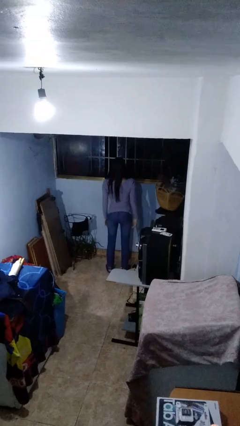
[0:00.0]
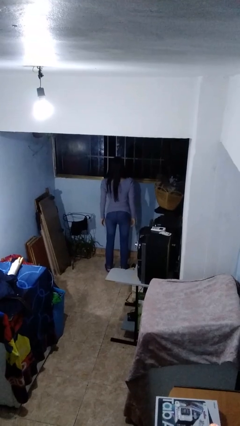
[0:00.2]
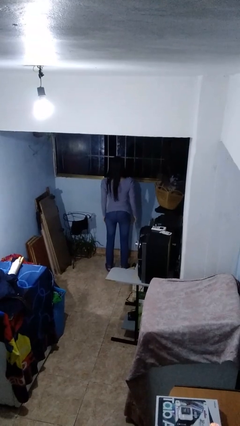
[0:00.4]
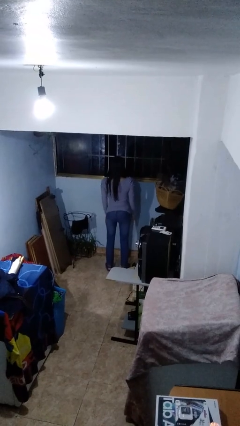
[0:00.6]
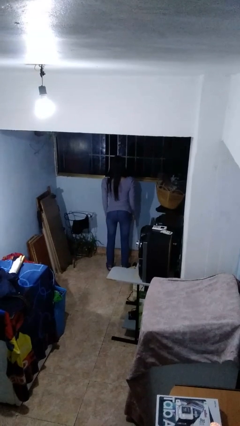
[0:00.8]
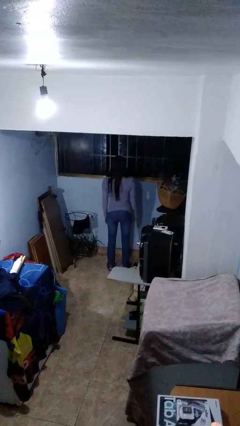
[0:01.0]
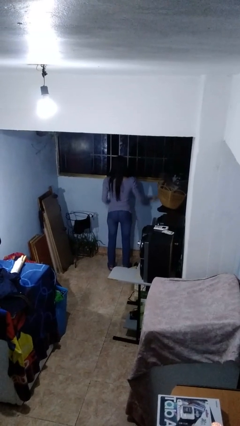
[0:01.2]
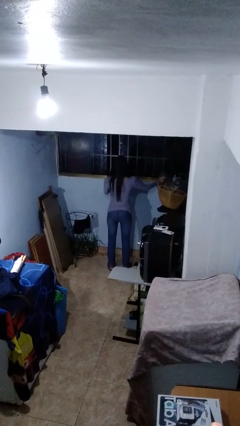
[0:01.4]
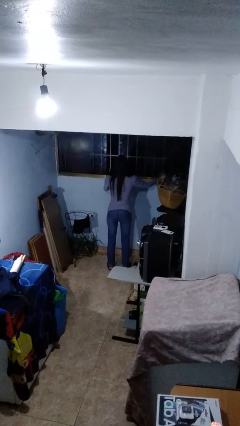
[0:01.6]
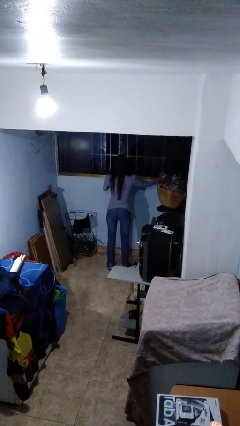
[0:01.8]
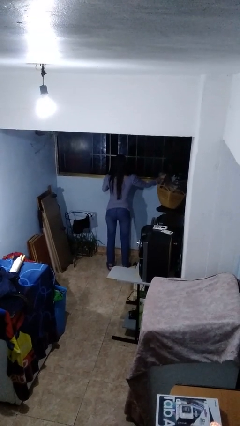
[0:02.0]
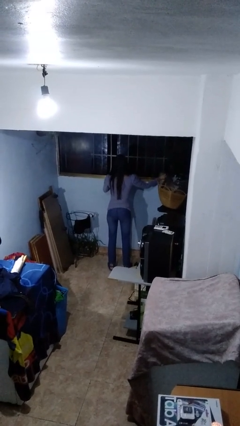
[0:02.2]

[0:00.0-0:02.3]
person closes home window

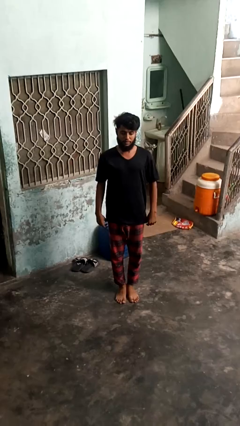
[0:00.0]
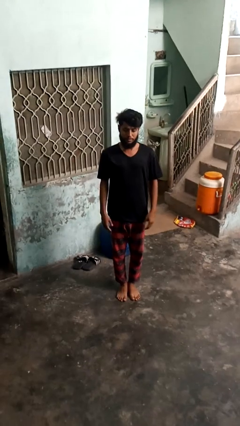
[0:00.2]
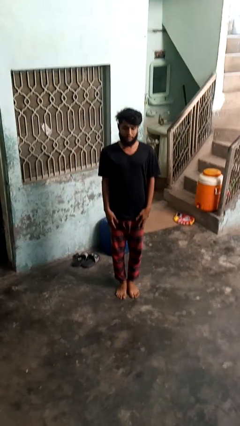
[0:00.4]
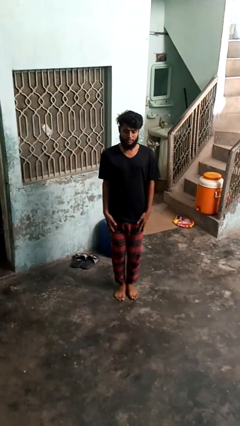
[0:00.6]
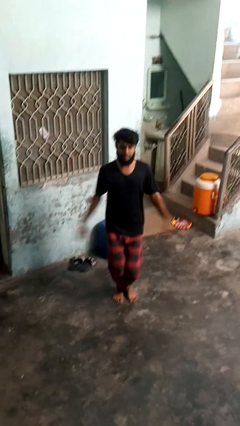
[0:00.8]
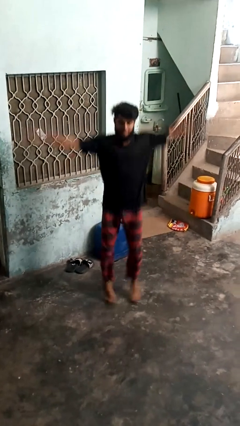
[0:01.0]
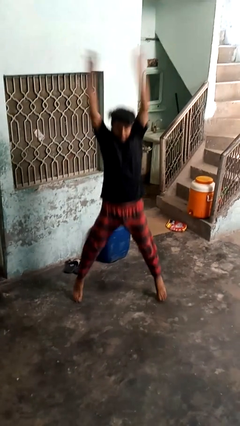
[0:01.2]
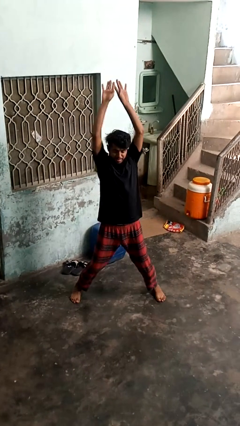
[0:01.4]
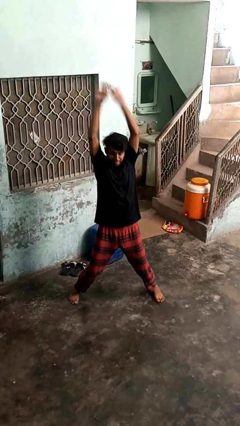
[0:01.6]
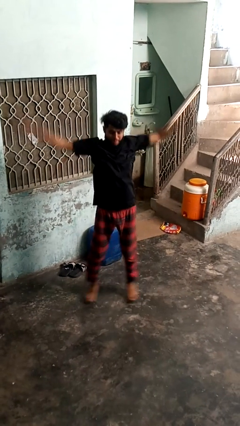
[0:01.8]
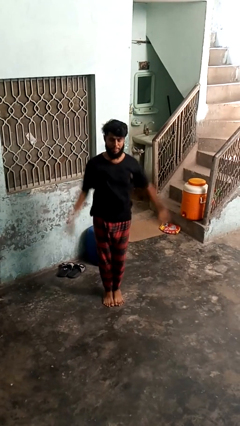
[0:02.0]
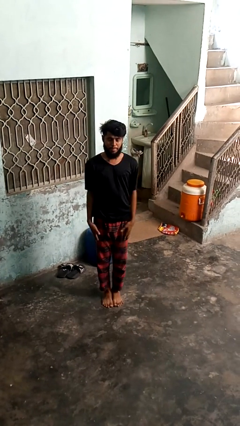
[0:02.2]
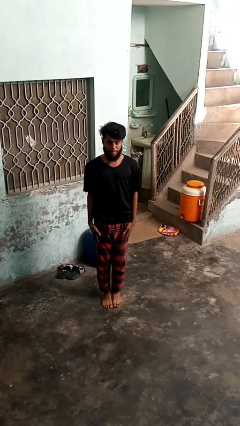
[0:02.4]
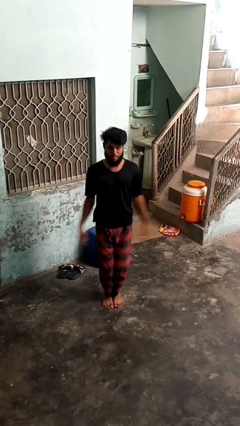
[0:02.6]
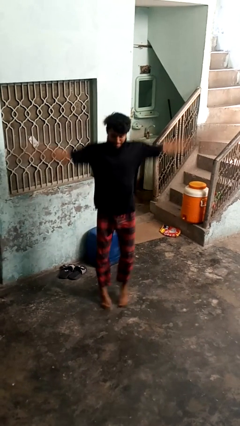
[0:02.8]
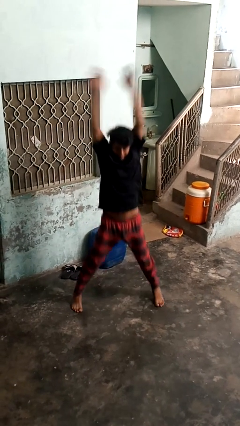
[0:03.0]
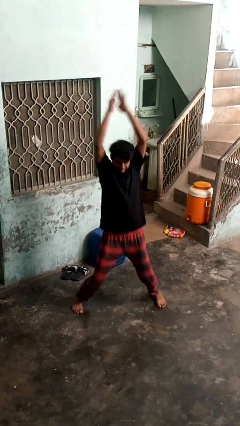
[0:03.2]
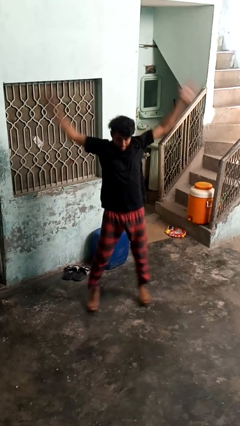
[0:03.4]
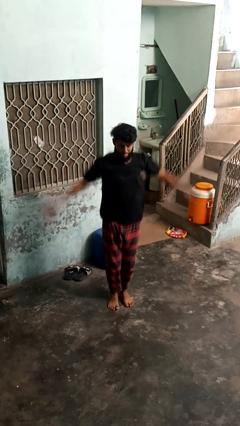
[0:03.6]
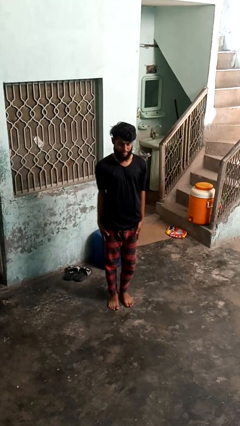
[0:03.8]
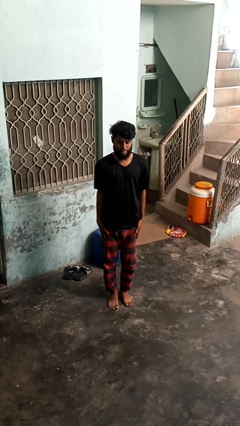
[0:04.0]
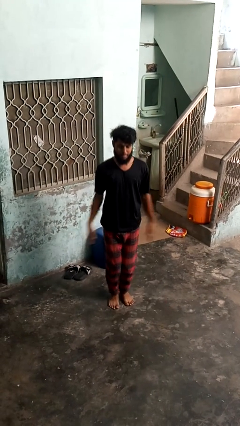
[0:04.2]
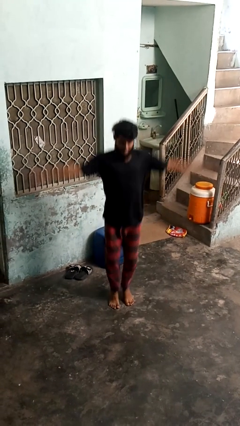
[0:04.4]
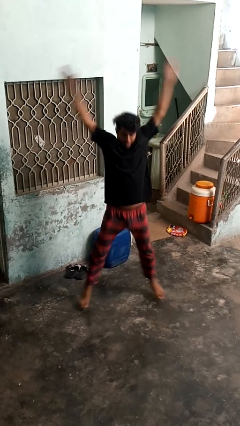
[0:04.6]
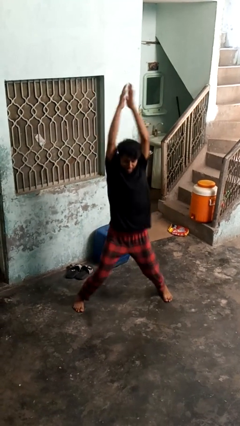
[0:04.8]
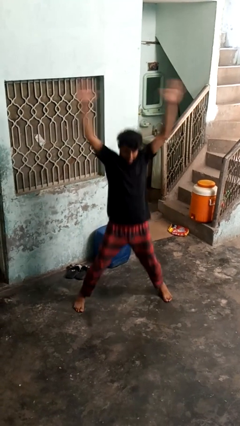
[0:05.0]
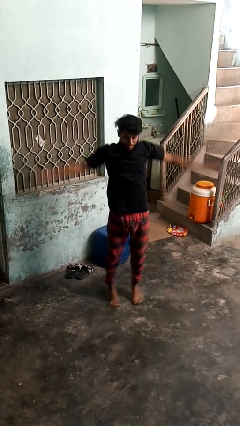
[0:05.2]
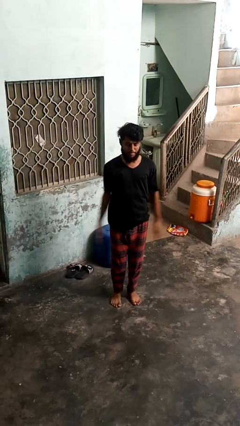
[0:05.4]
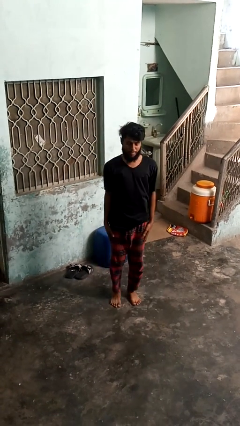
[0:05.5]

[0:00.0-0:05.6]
person exercises with situp

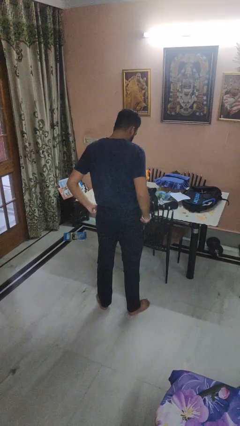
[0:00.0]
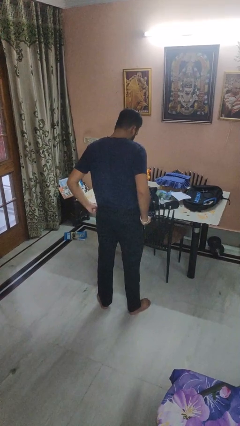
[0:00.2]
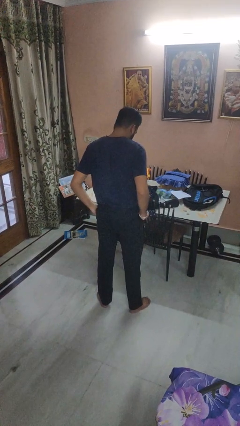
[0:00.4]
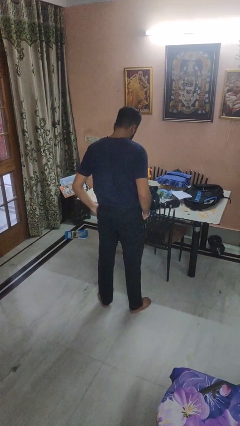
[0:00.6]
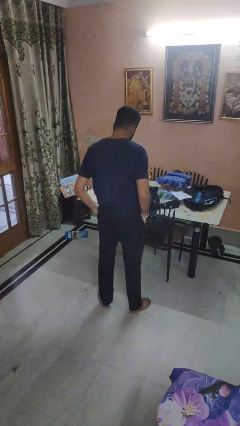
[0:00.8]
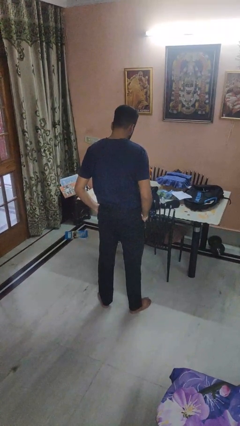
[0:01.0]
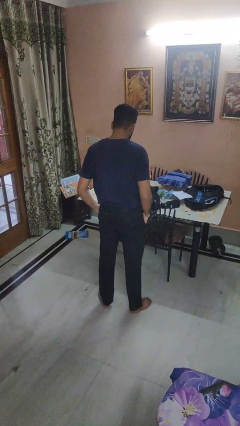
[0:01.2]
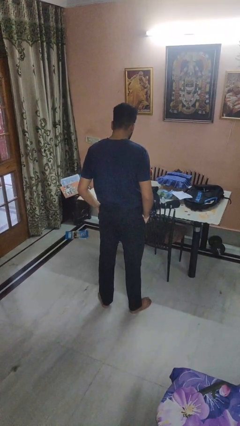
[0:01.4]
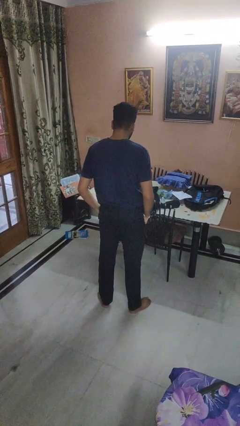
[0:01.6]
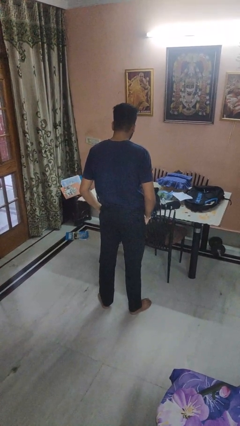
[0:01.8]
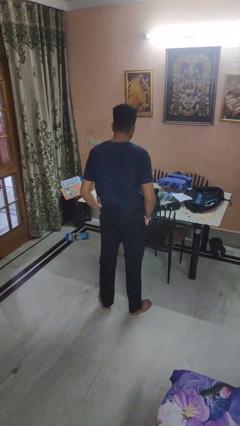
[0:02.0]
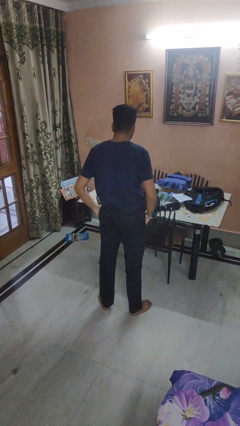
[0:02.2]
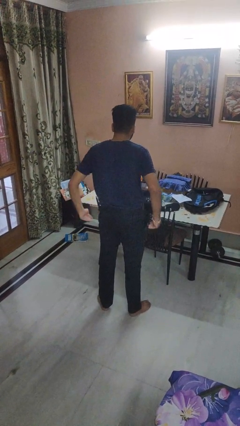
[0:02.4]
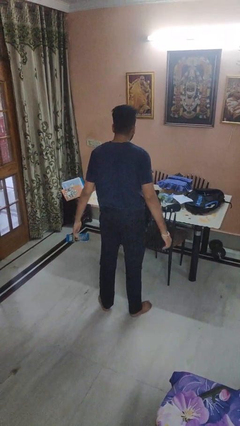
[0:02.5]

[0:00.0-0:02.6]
person puts hands in back pockets

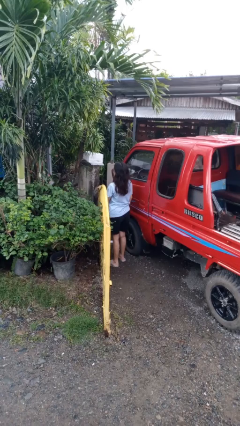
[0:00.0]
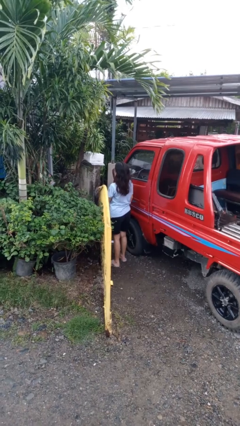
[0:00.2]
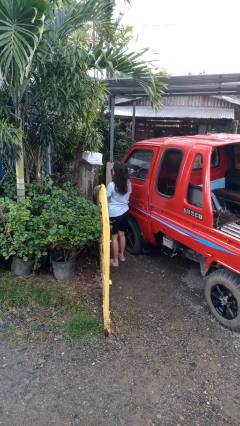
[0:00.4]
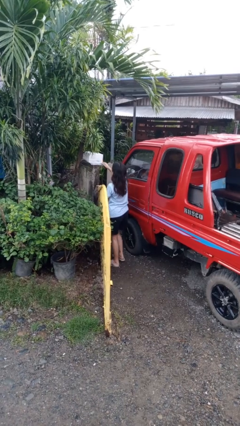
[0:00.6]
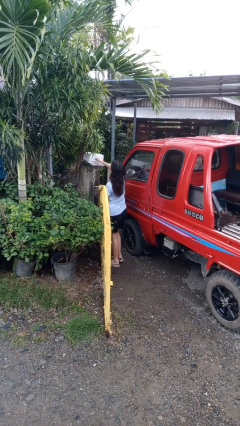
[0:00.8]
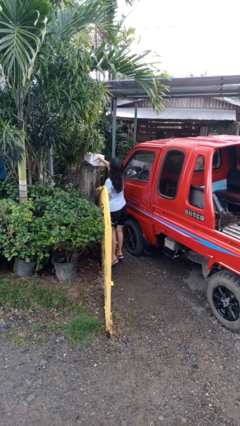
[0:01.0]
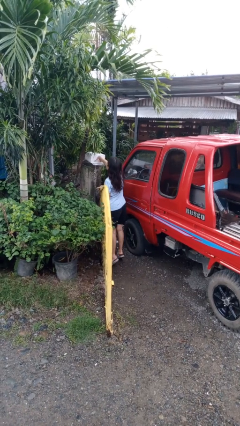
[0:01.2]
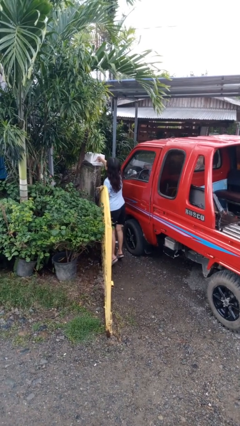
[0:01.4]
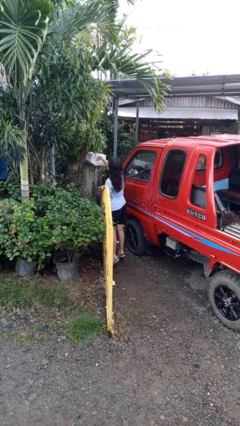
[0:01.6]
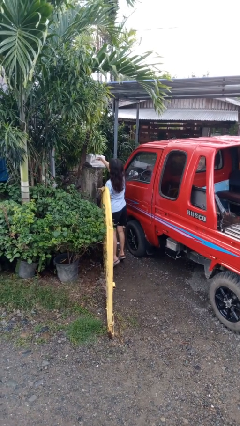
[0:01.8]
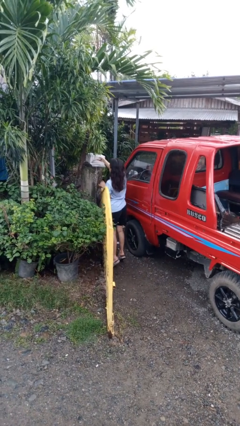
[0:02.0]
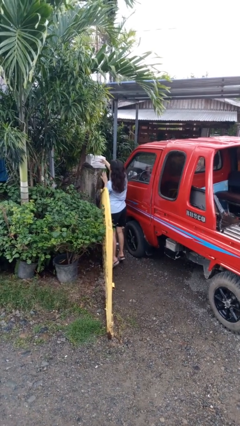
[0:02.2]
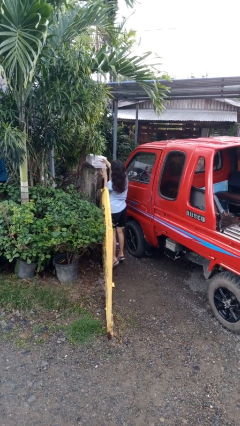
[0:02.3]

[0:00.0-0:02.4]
person takes letters from mailbox

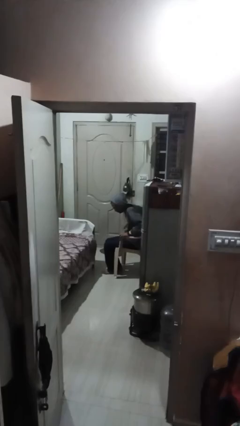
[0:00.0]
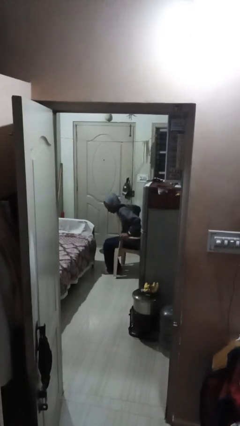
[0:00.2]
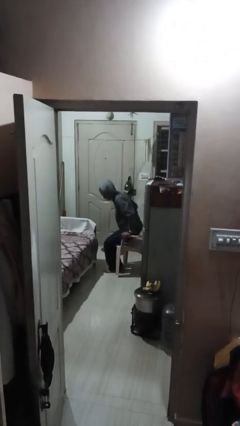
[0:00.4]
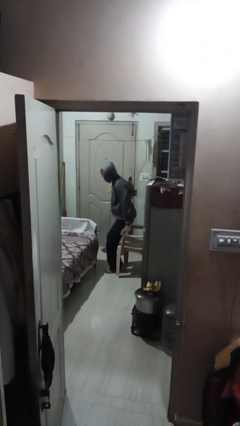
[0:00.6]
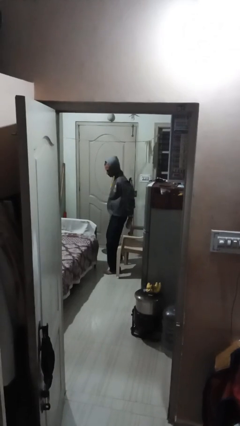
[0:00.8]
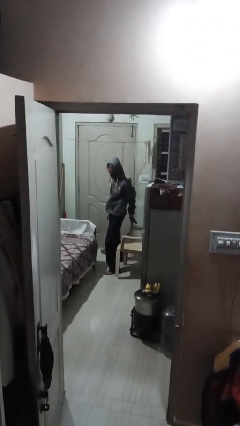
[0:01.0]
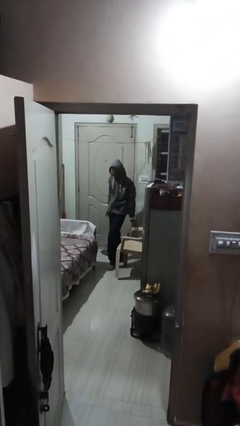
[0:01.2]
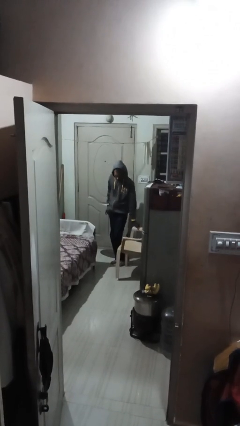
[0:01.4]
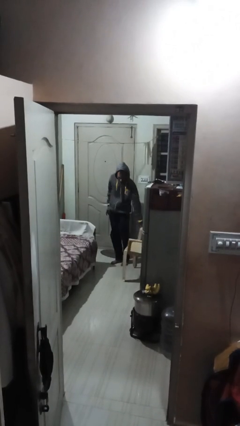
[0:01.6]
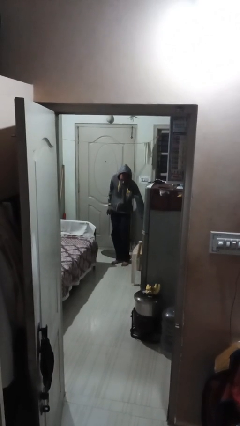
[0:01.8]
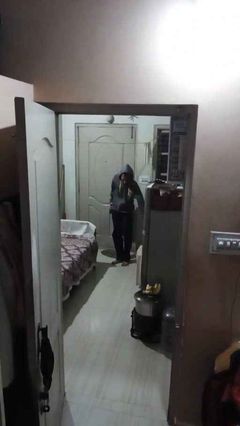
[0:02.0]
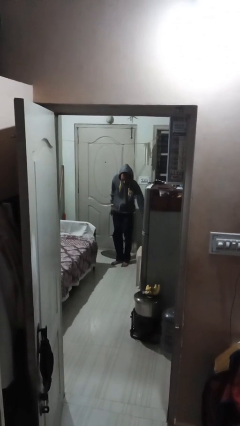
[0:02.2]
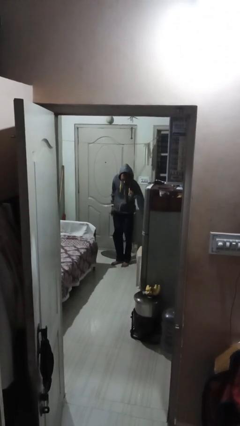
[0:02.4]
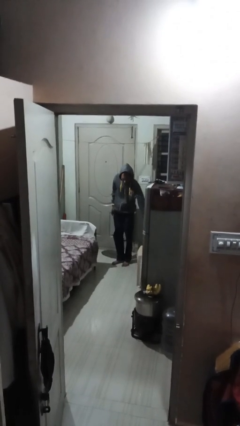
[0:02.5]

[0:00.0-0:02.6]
person stands up

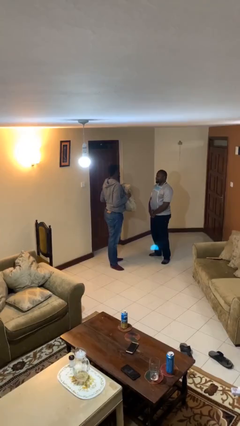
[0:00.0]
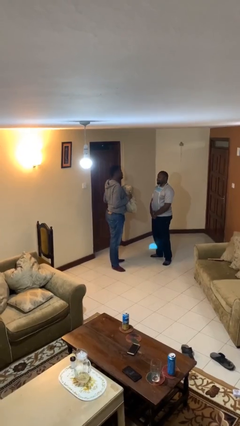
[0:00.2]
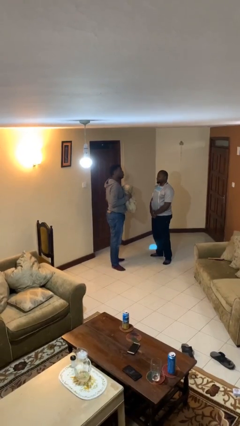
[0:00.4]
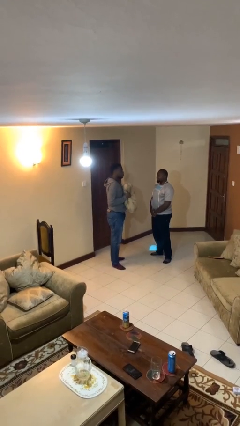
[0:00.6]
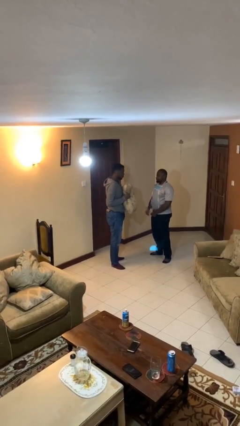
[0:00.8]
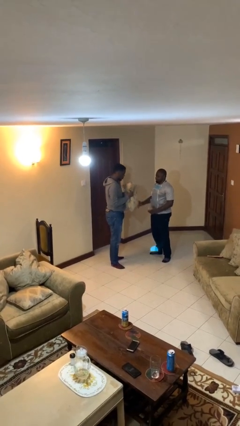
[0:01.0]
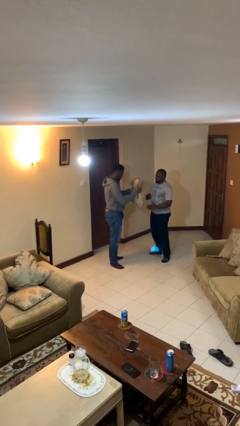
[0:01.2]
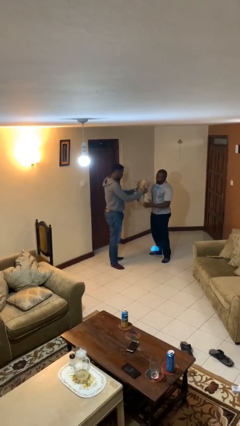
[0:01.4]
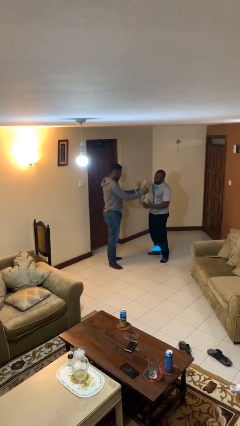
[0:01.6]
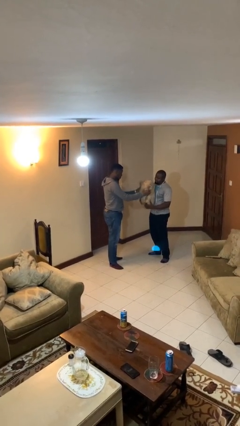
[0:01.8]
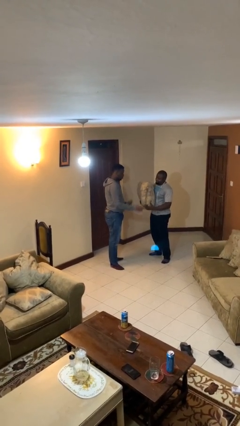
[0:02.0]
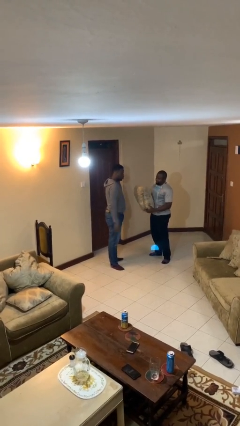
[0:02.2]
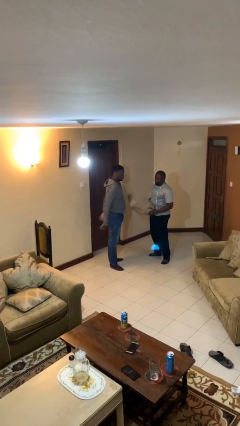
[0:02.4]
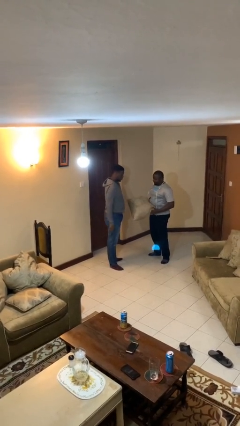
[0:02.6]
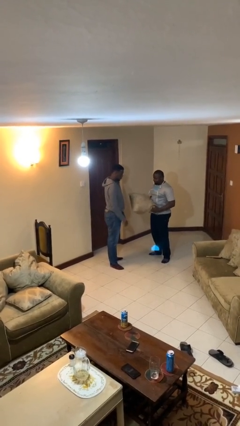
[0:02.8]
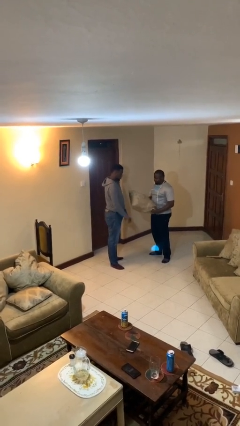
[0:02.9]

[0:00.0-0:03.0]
person transfers object to person
